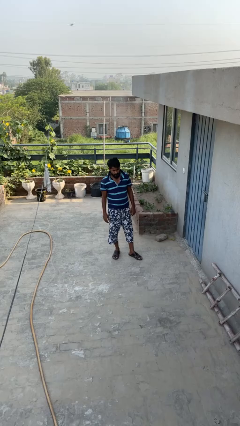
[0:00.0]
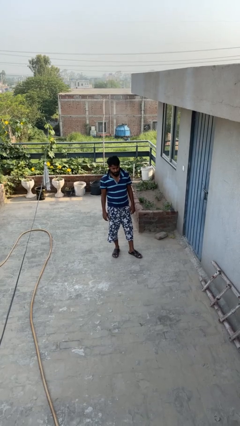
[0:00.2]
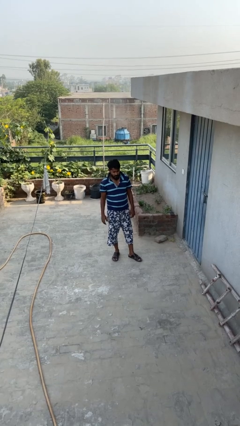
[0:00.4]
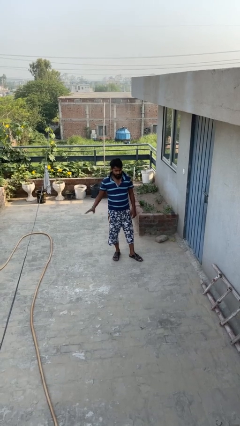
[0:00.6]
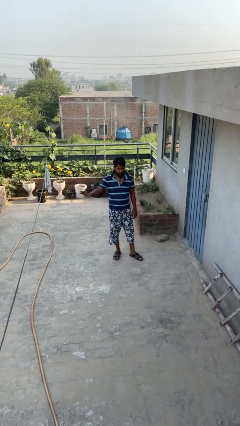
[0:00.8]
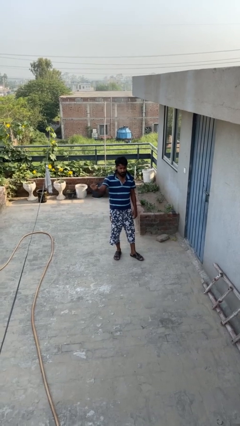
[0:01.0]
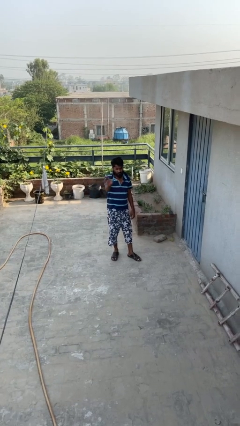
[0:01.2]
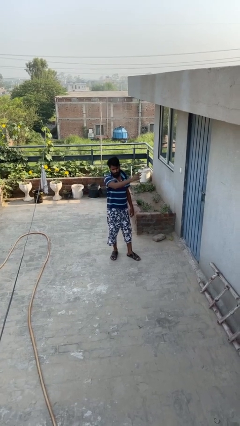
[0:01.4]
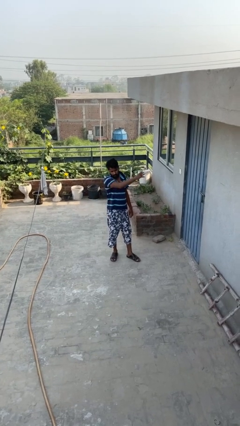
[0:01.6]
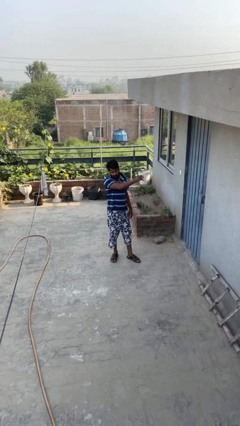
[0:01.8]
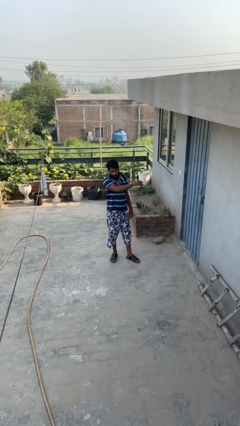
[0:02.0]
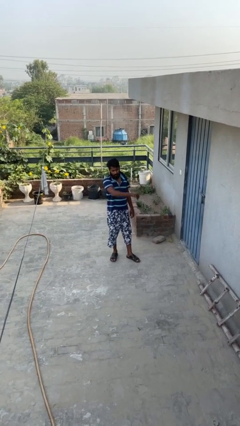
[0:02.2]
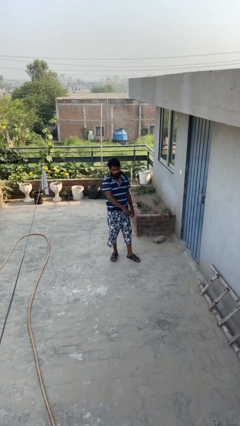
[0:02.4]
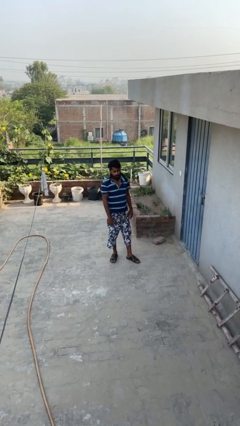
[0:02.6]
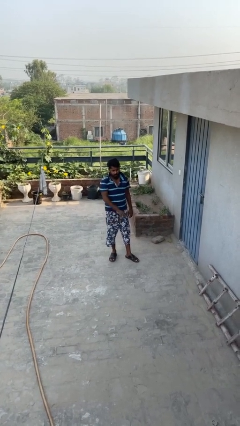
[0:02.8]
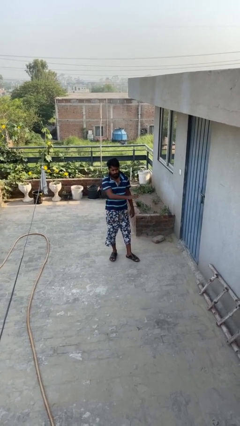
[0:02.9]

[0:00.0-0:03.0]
person gestures swipe left

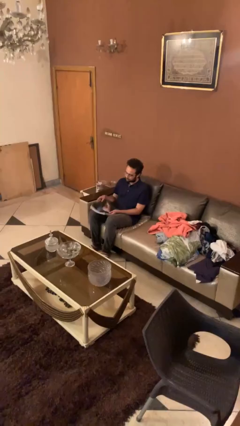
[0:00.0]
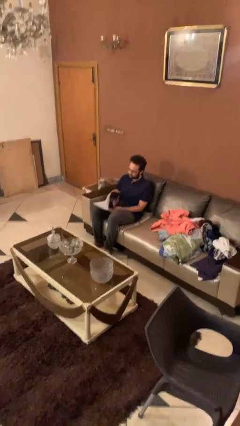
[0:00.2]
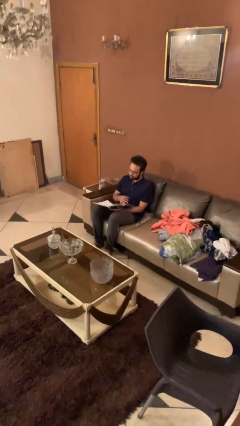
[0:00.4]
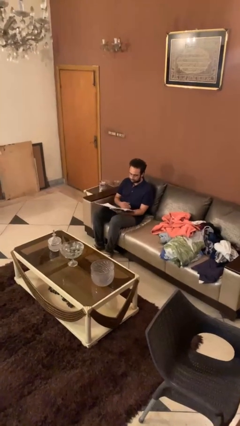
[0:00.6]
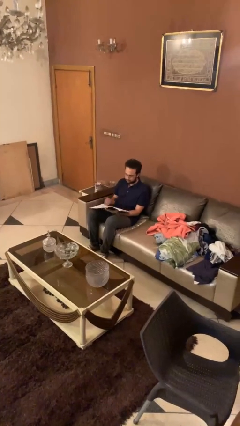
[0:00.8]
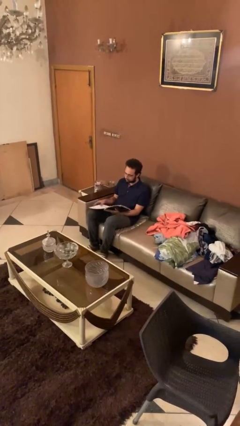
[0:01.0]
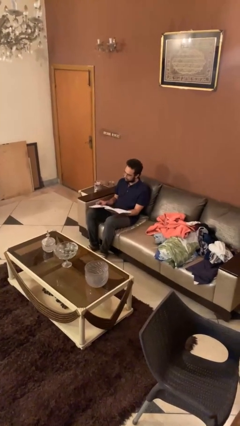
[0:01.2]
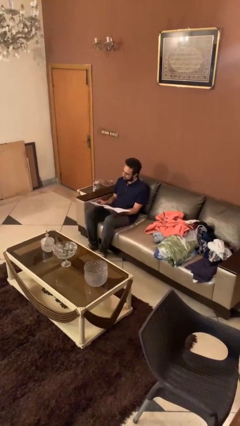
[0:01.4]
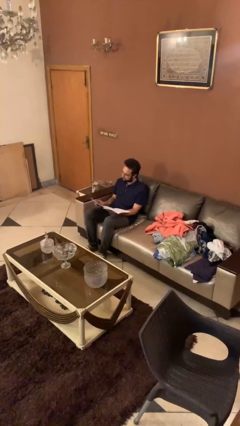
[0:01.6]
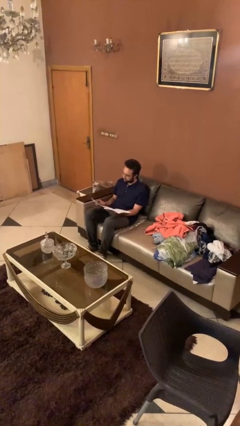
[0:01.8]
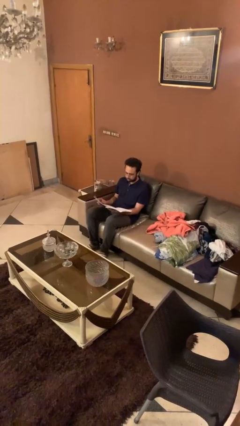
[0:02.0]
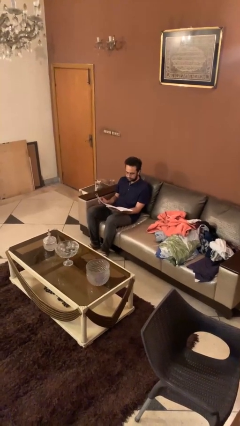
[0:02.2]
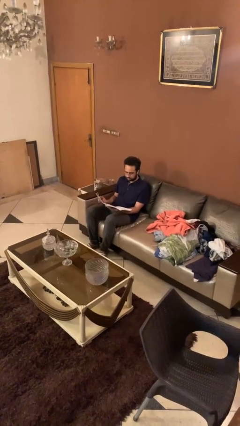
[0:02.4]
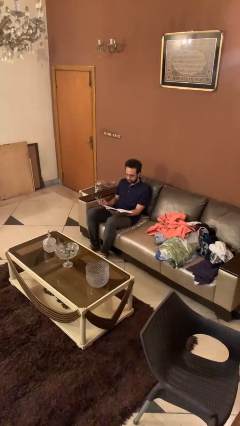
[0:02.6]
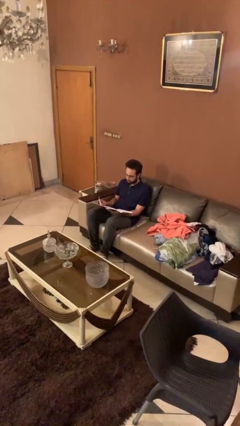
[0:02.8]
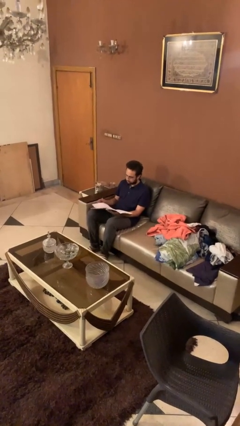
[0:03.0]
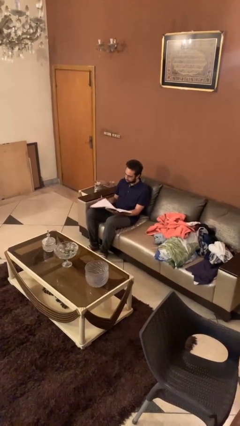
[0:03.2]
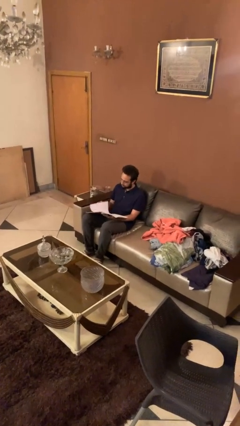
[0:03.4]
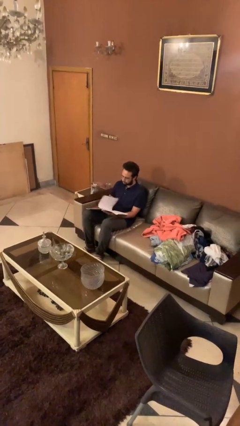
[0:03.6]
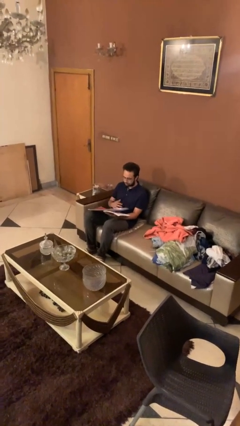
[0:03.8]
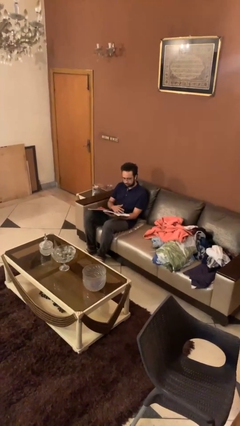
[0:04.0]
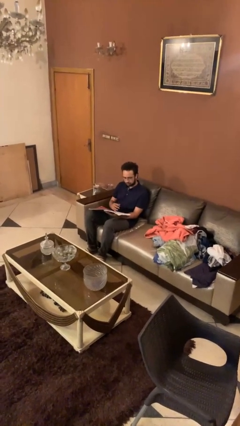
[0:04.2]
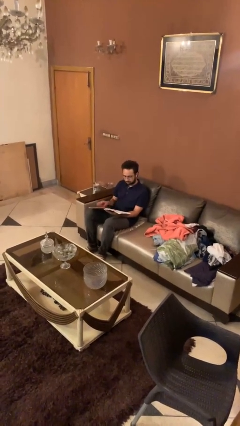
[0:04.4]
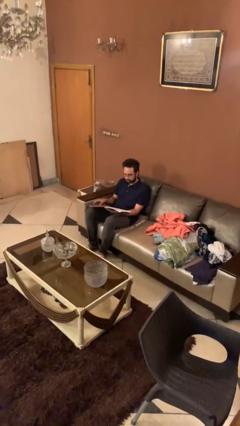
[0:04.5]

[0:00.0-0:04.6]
person reads document

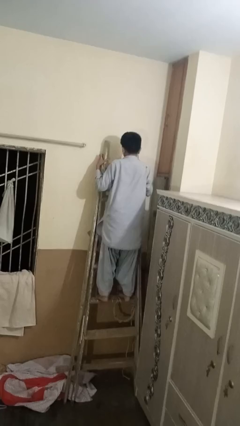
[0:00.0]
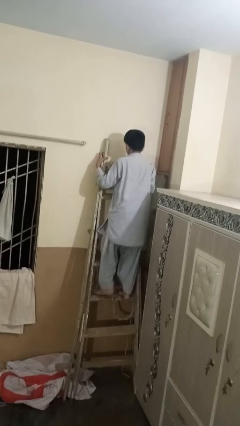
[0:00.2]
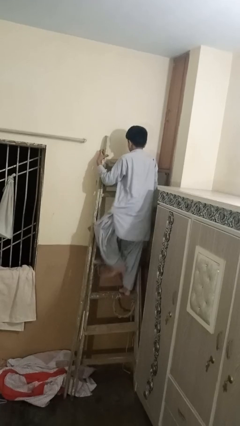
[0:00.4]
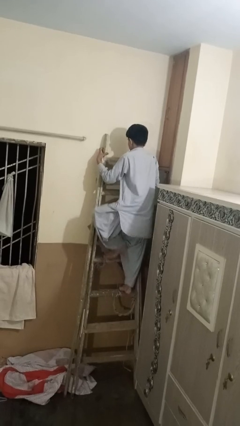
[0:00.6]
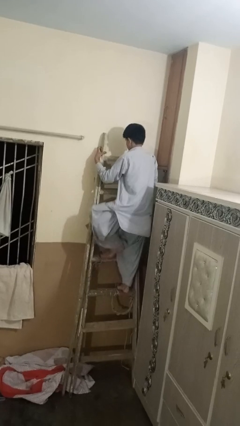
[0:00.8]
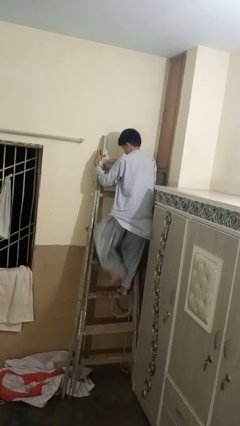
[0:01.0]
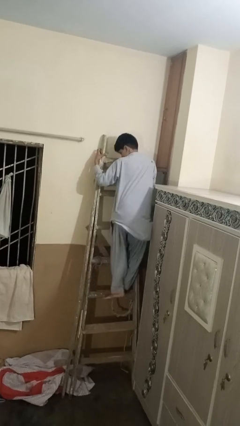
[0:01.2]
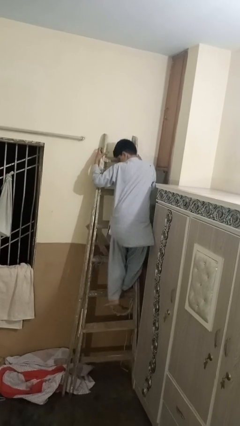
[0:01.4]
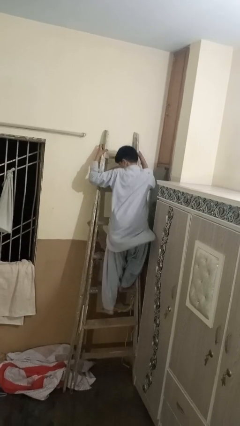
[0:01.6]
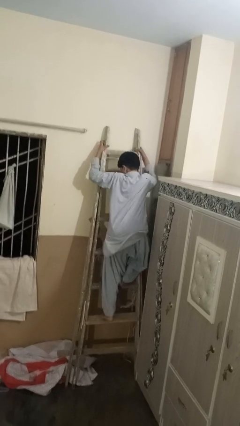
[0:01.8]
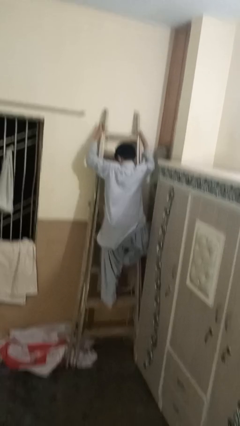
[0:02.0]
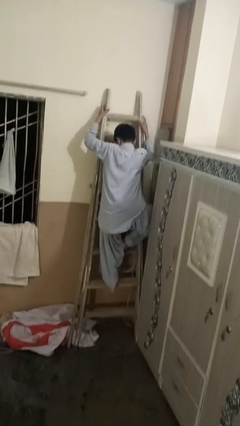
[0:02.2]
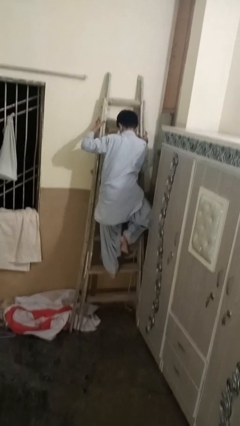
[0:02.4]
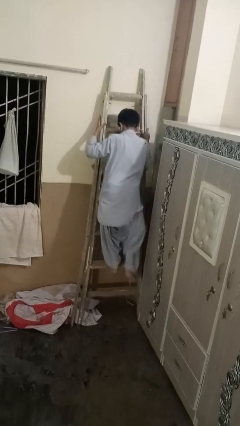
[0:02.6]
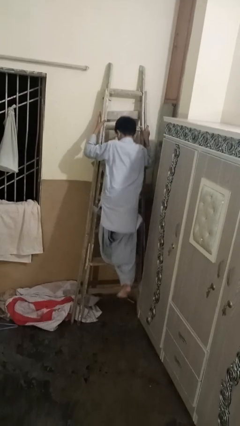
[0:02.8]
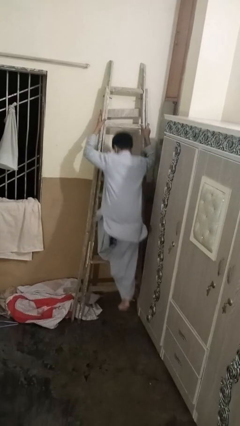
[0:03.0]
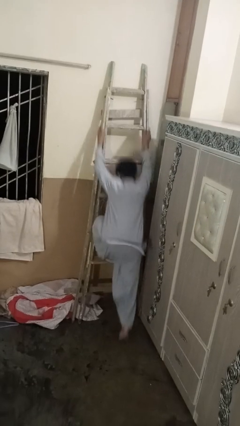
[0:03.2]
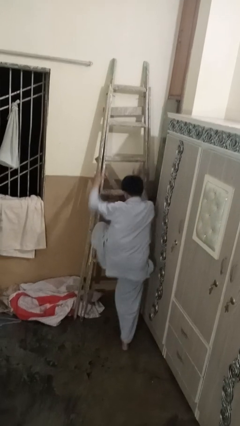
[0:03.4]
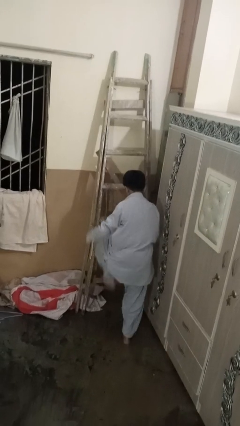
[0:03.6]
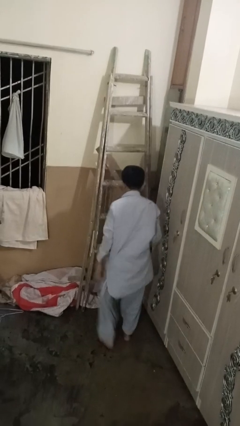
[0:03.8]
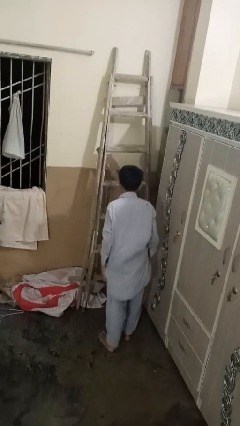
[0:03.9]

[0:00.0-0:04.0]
person climbs down ladder

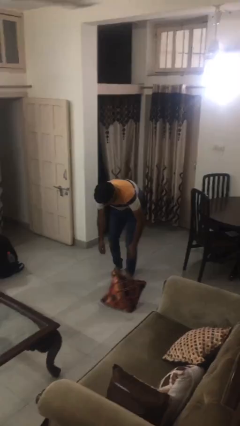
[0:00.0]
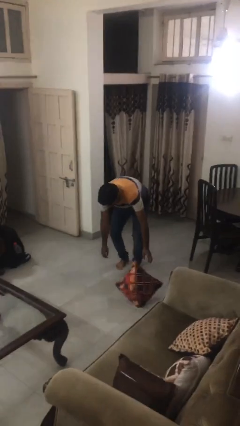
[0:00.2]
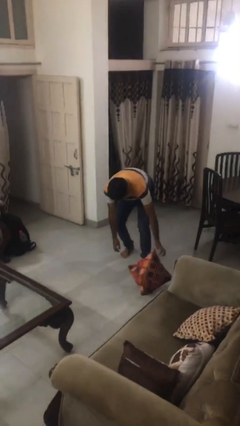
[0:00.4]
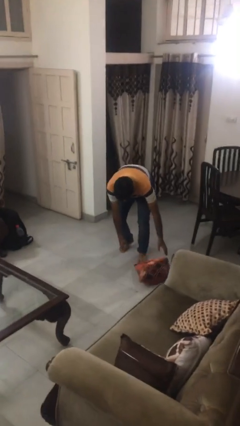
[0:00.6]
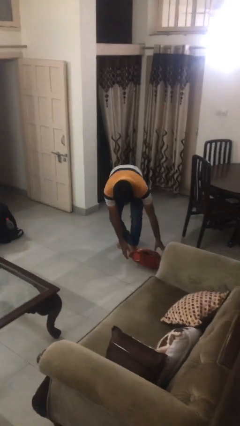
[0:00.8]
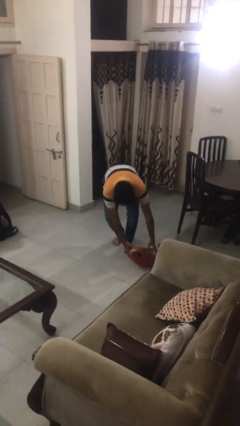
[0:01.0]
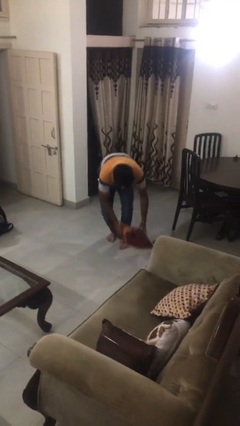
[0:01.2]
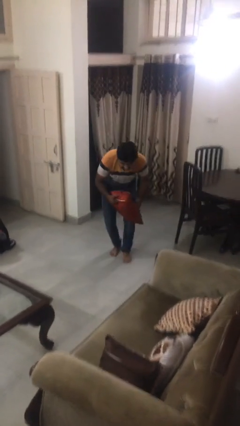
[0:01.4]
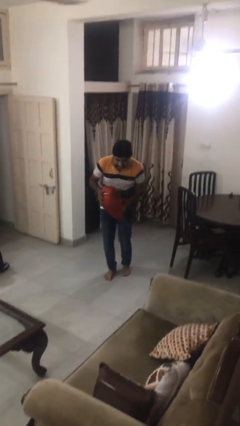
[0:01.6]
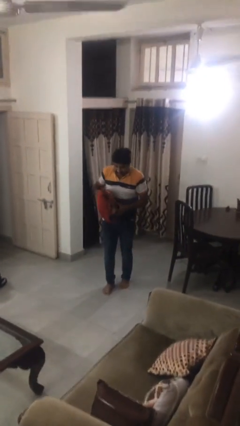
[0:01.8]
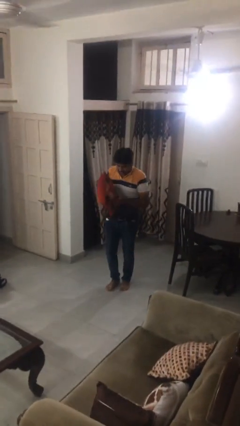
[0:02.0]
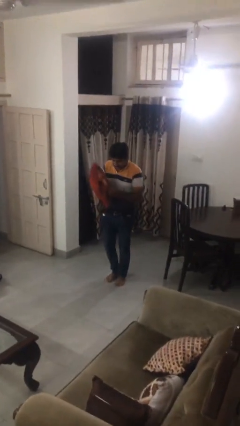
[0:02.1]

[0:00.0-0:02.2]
person picks up object from floor

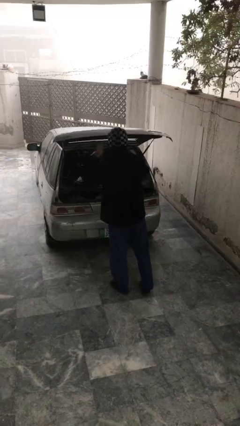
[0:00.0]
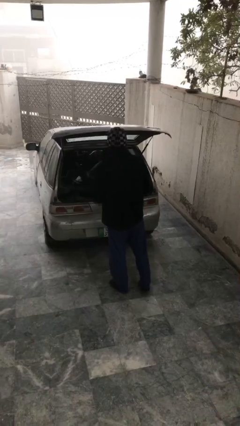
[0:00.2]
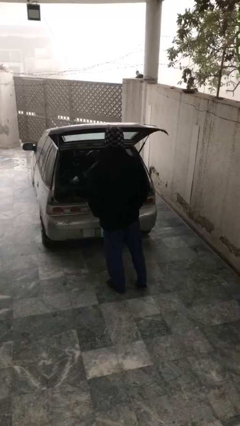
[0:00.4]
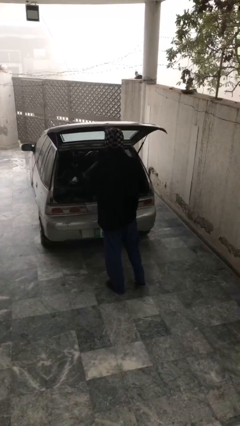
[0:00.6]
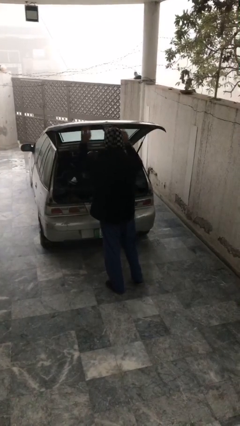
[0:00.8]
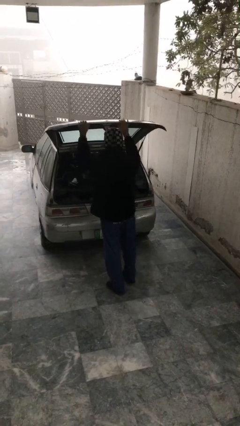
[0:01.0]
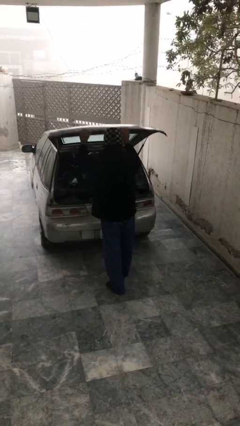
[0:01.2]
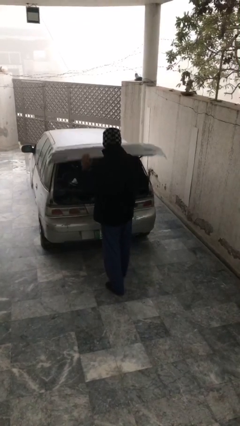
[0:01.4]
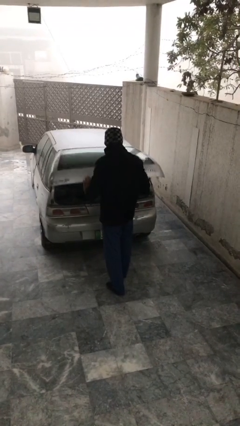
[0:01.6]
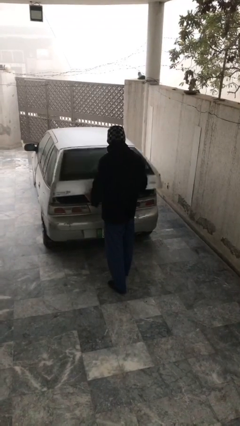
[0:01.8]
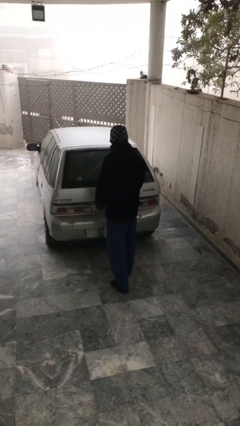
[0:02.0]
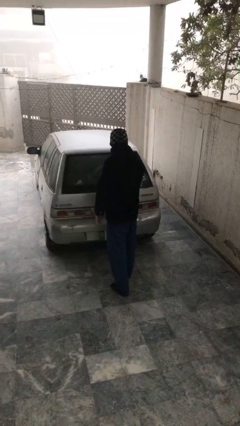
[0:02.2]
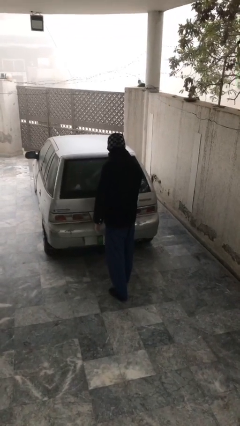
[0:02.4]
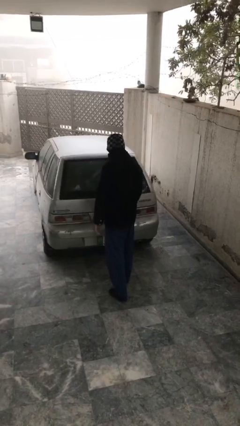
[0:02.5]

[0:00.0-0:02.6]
person closes car trunk

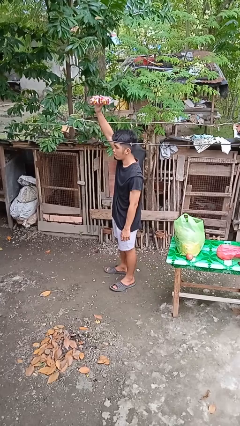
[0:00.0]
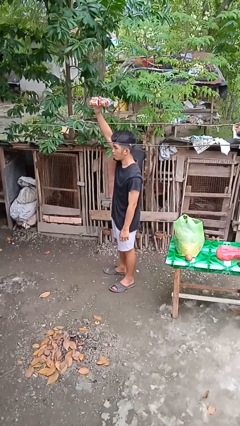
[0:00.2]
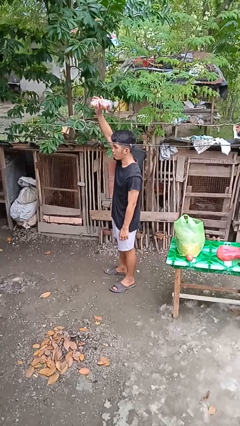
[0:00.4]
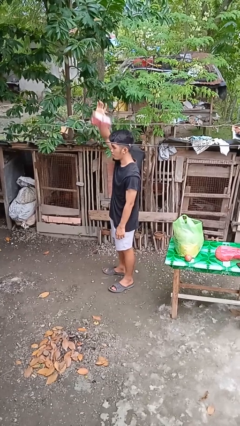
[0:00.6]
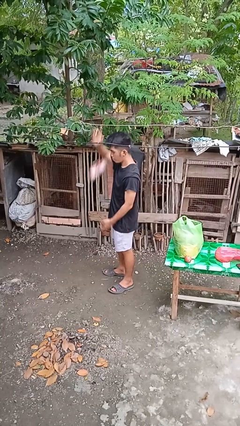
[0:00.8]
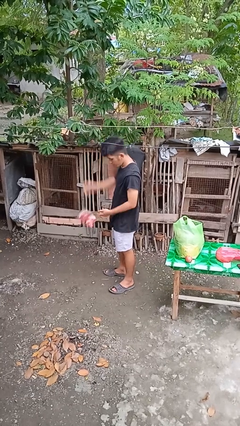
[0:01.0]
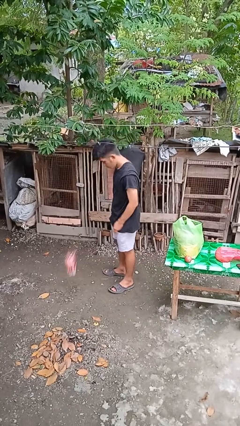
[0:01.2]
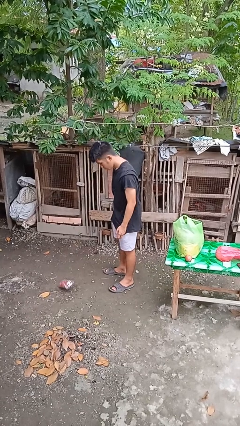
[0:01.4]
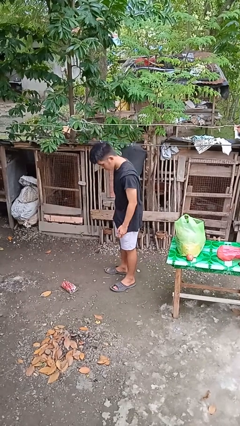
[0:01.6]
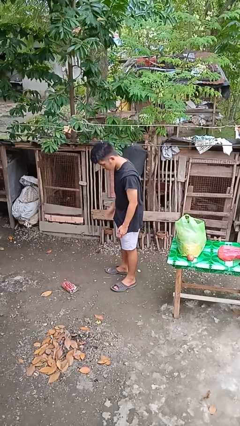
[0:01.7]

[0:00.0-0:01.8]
person drops object
